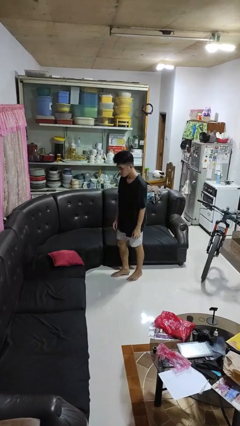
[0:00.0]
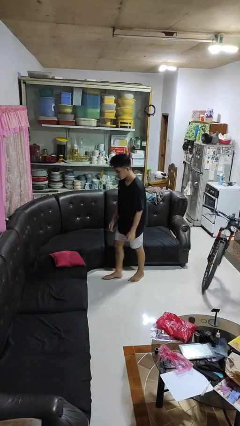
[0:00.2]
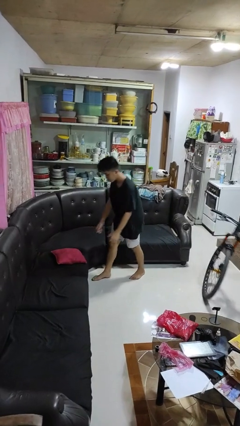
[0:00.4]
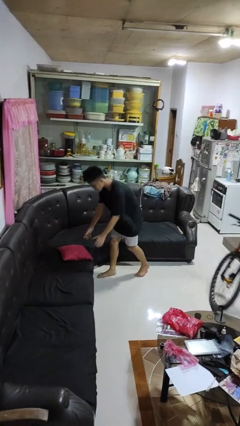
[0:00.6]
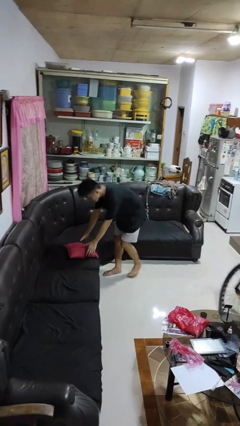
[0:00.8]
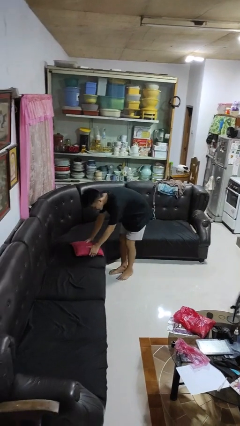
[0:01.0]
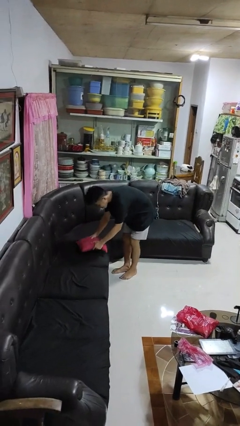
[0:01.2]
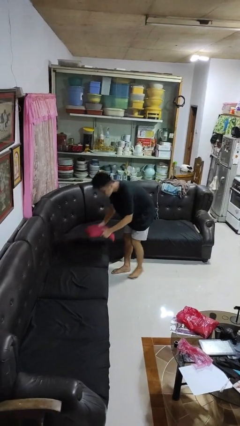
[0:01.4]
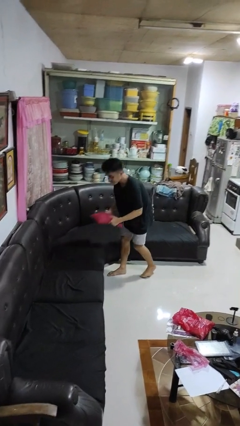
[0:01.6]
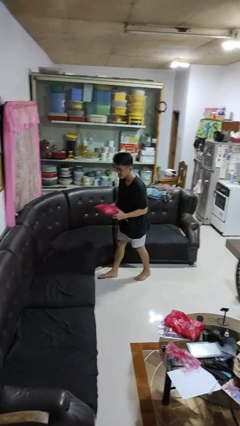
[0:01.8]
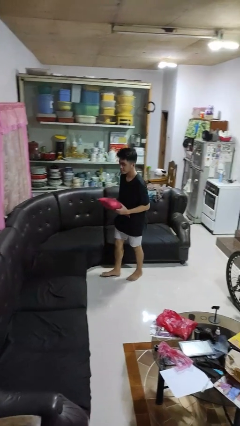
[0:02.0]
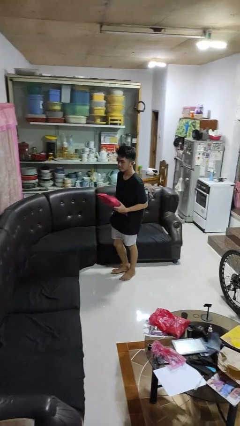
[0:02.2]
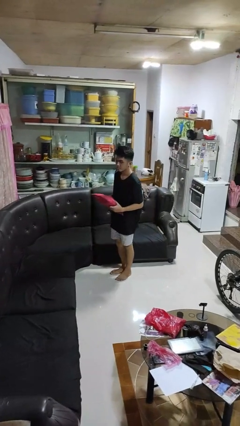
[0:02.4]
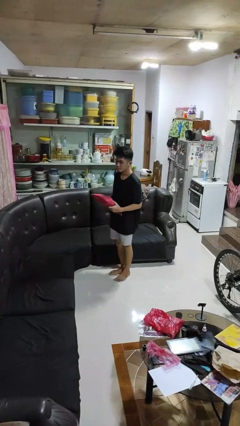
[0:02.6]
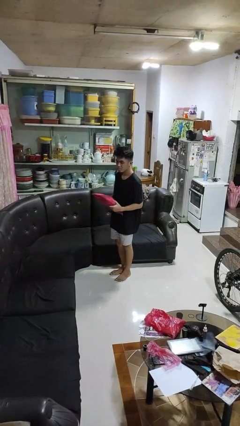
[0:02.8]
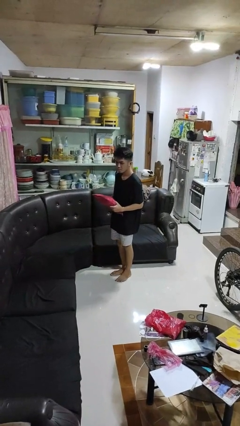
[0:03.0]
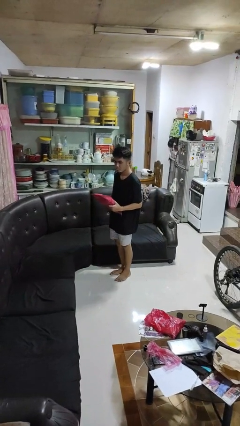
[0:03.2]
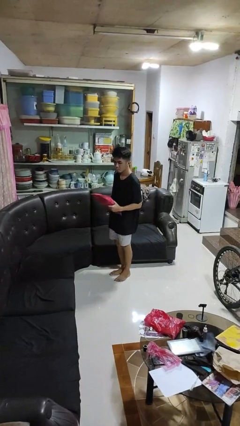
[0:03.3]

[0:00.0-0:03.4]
person picks up object from couch

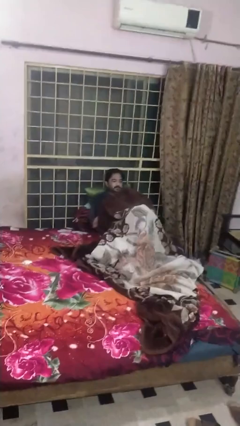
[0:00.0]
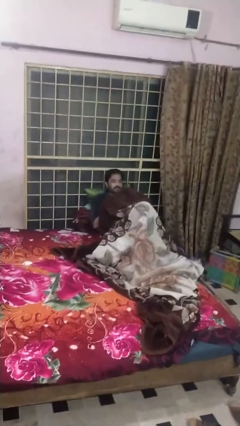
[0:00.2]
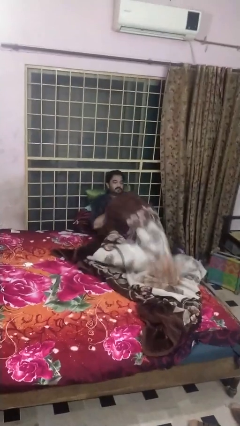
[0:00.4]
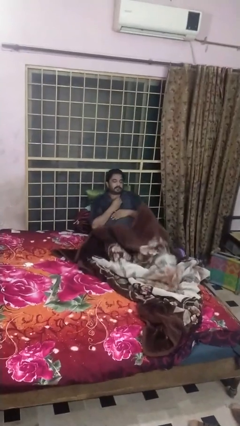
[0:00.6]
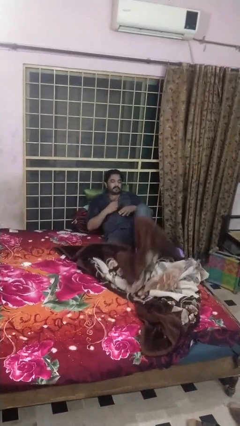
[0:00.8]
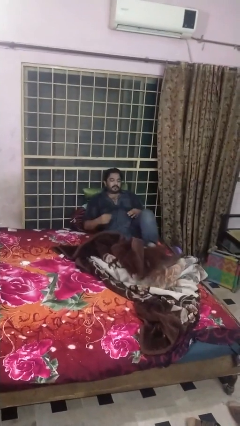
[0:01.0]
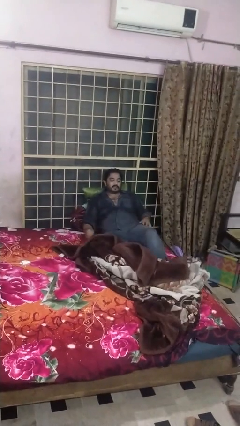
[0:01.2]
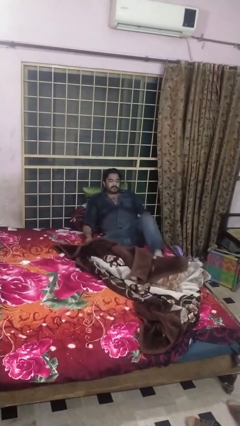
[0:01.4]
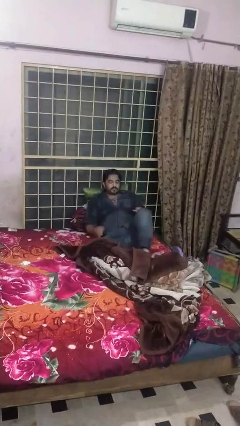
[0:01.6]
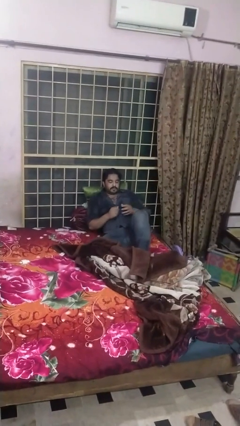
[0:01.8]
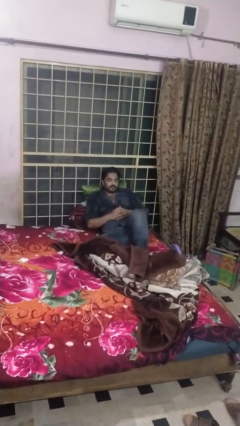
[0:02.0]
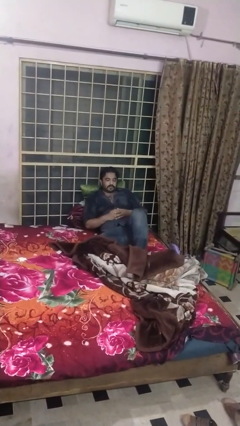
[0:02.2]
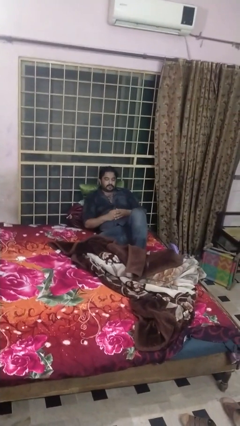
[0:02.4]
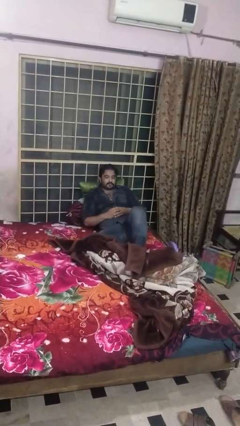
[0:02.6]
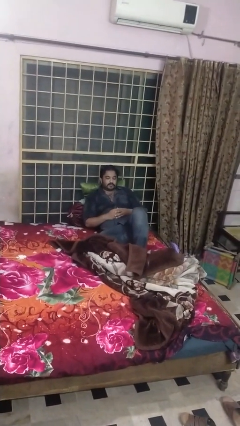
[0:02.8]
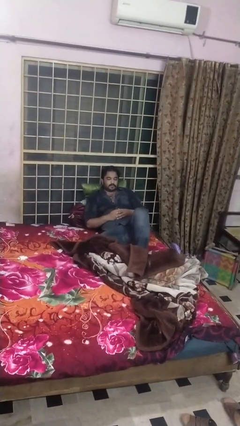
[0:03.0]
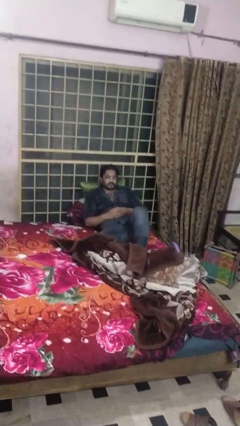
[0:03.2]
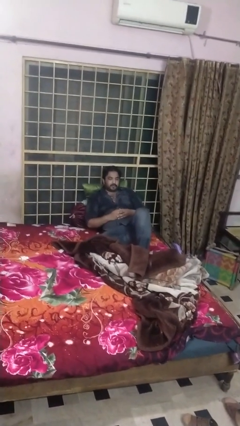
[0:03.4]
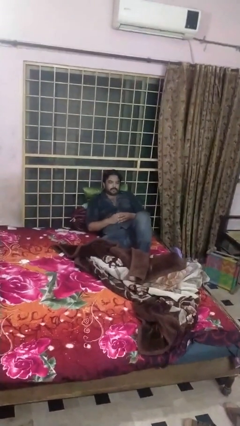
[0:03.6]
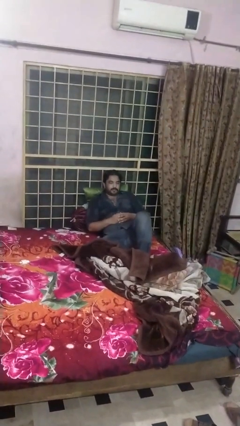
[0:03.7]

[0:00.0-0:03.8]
person uncovers with blanket

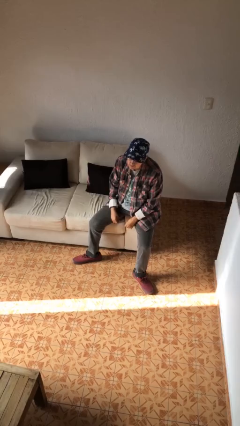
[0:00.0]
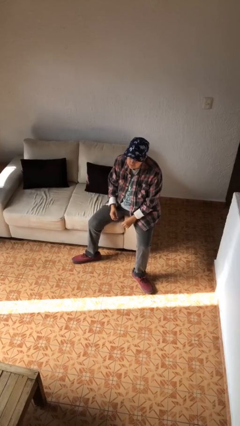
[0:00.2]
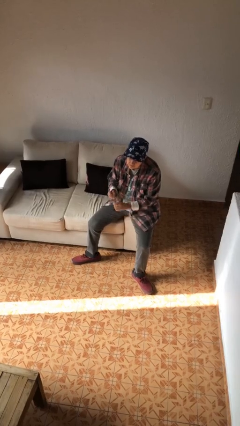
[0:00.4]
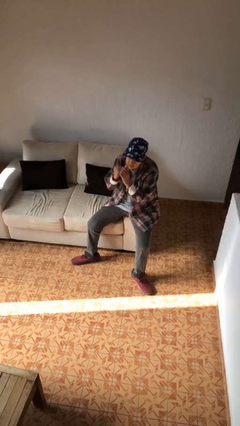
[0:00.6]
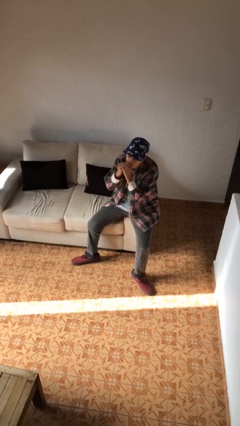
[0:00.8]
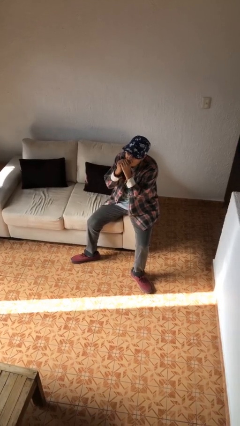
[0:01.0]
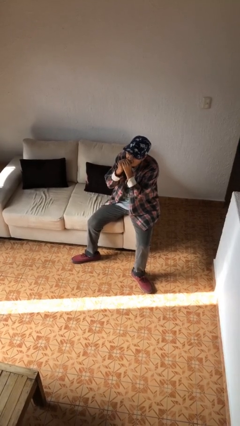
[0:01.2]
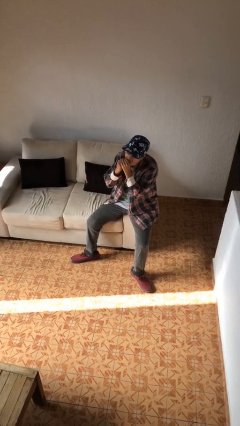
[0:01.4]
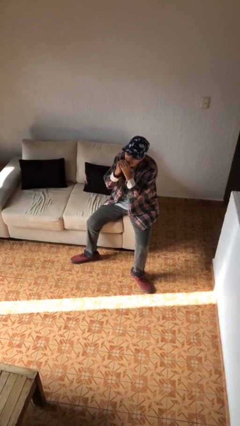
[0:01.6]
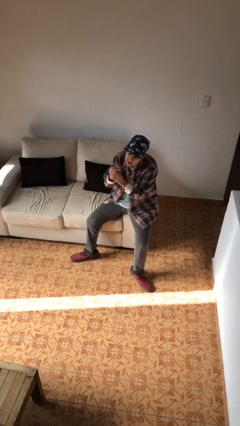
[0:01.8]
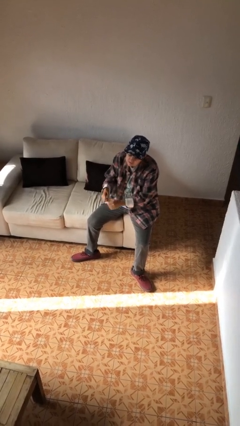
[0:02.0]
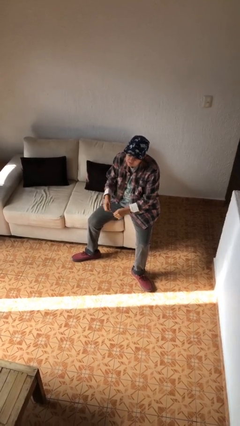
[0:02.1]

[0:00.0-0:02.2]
person flosses

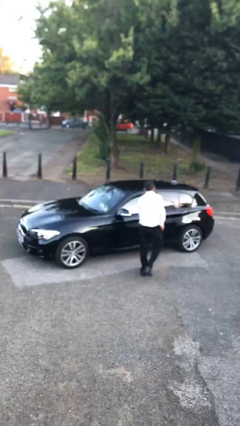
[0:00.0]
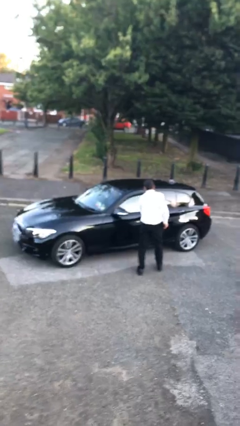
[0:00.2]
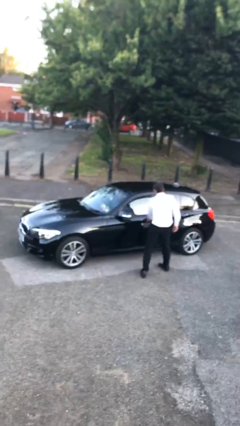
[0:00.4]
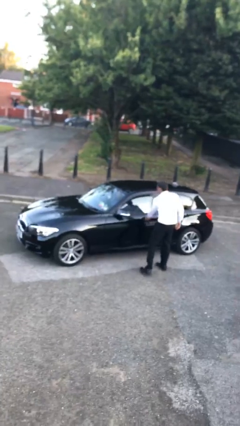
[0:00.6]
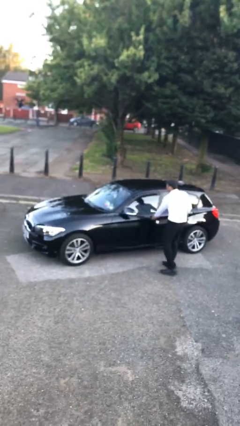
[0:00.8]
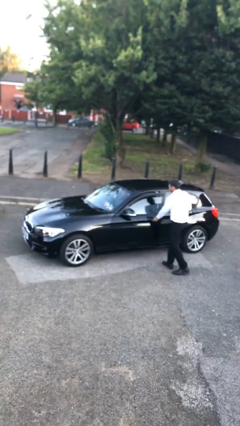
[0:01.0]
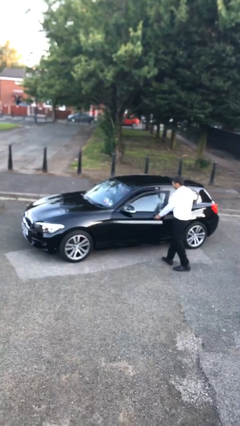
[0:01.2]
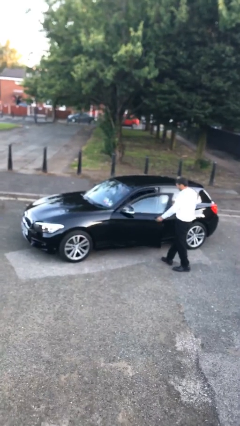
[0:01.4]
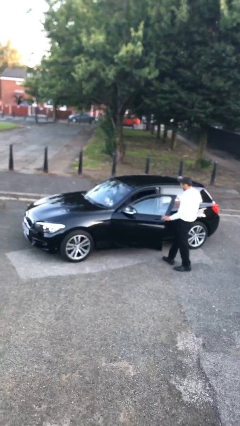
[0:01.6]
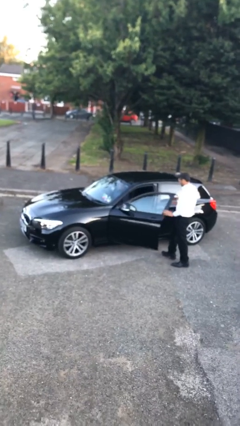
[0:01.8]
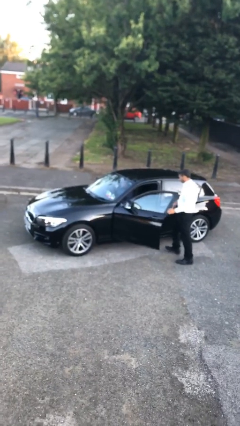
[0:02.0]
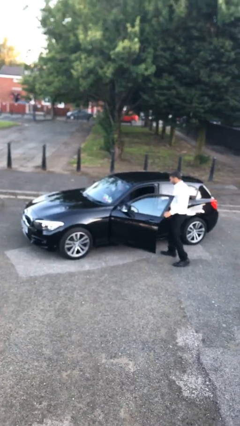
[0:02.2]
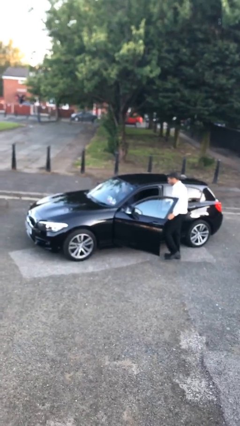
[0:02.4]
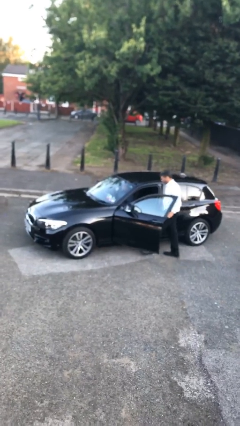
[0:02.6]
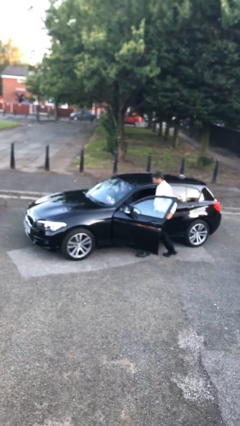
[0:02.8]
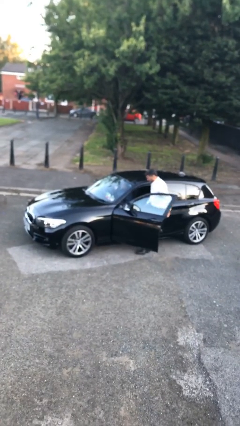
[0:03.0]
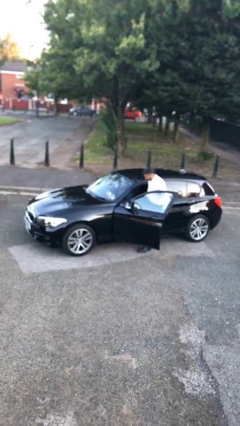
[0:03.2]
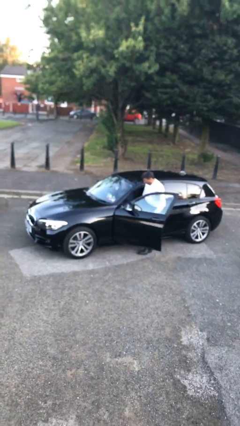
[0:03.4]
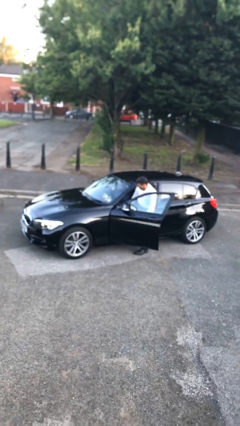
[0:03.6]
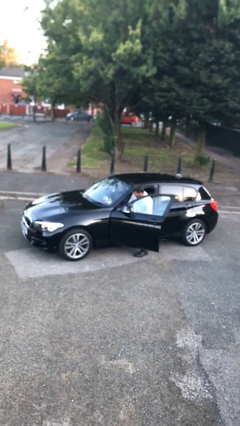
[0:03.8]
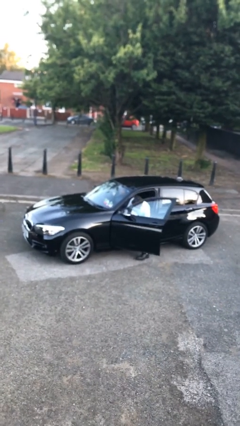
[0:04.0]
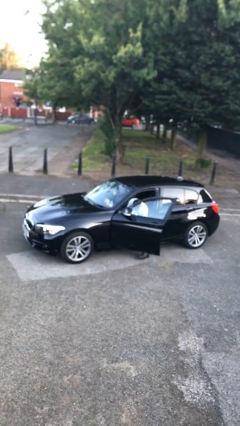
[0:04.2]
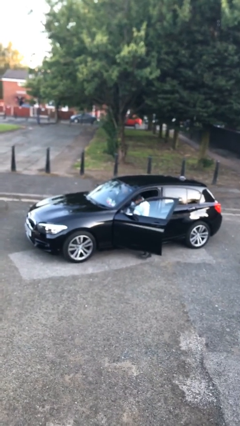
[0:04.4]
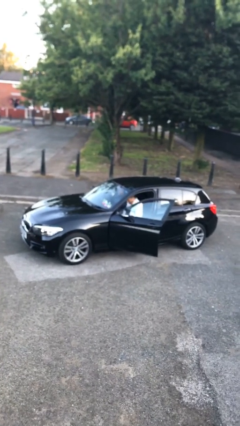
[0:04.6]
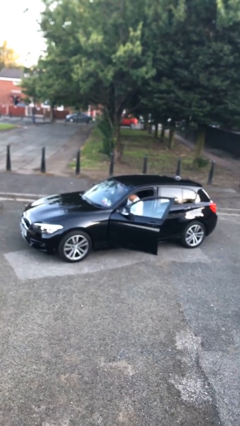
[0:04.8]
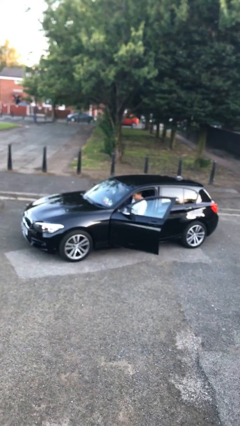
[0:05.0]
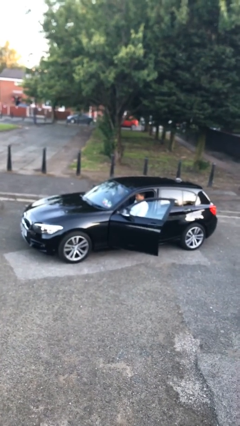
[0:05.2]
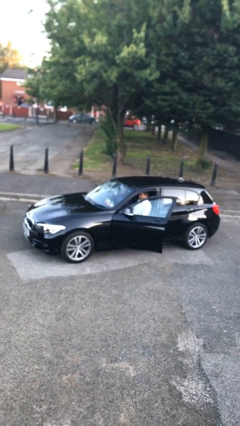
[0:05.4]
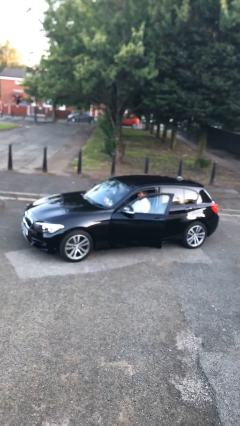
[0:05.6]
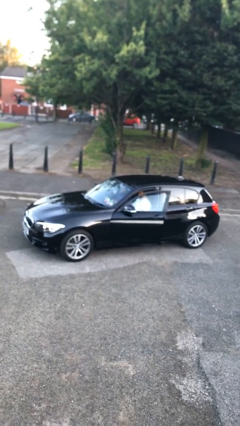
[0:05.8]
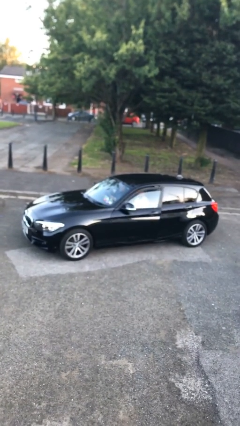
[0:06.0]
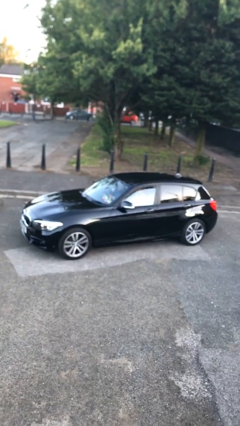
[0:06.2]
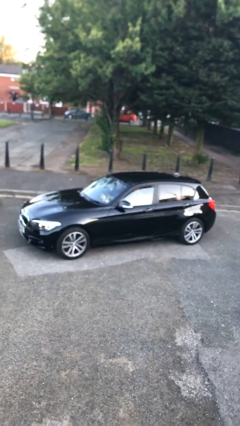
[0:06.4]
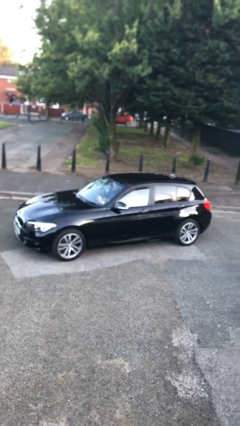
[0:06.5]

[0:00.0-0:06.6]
car picks up person

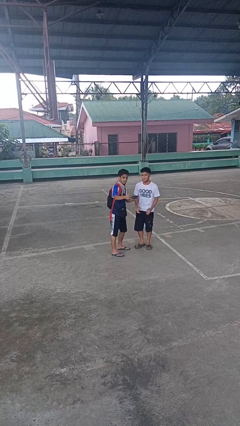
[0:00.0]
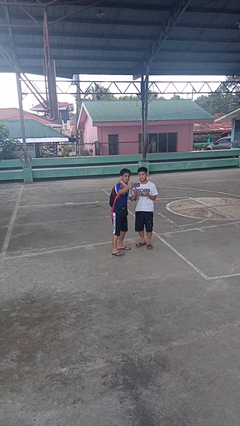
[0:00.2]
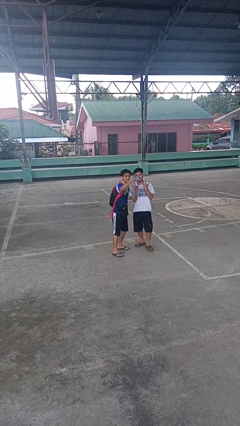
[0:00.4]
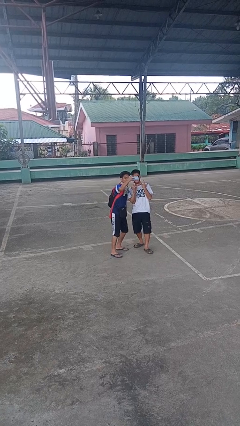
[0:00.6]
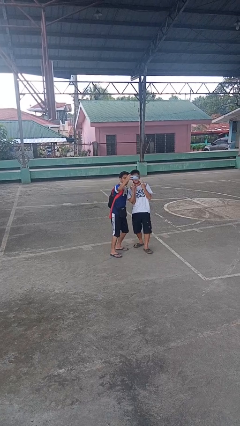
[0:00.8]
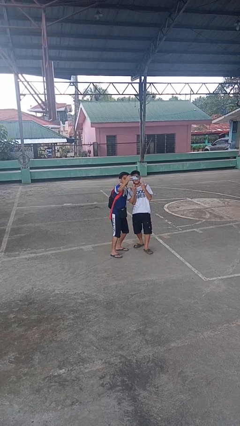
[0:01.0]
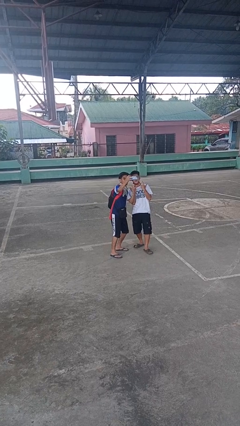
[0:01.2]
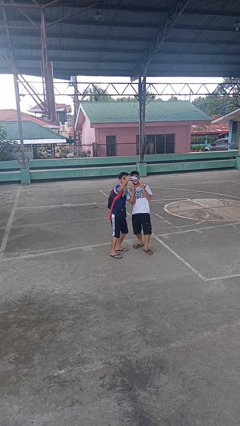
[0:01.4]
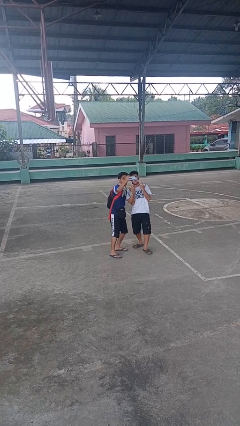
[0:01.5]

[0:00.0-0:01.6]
person takes selfie with person
